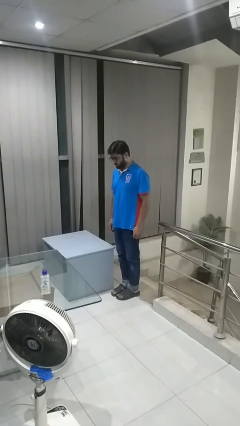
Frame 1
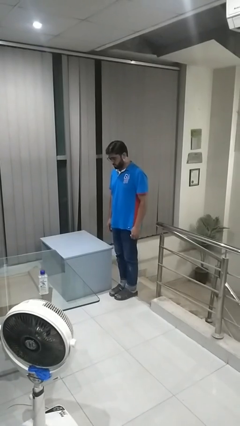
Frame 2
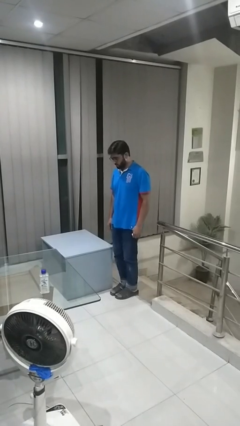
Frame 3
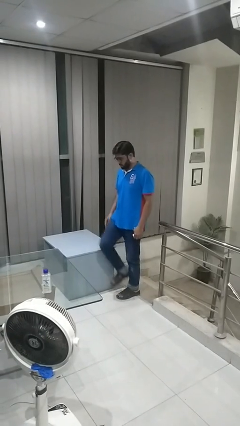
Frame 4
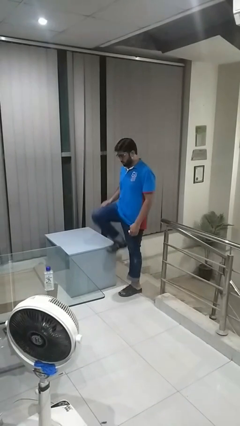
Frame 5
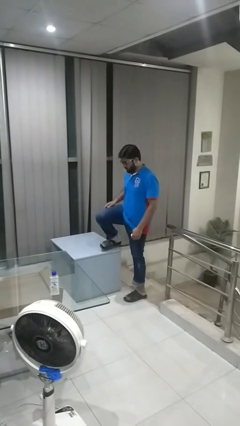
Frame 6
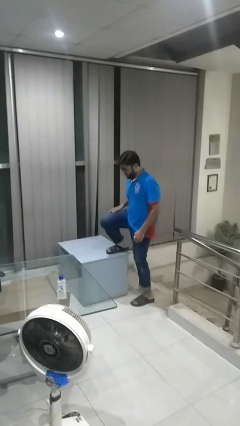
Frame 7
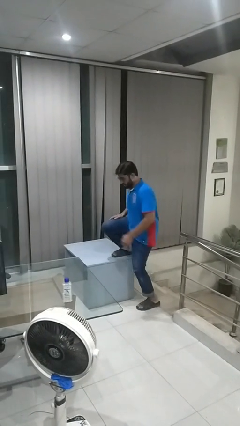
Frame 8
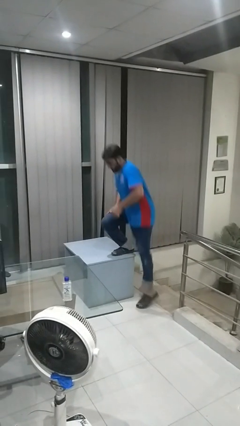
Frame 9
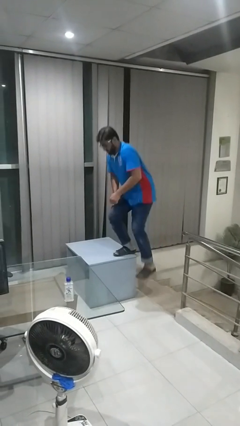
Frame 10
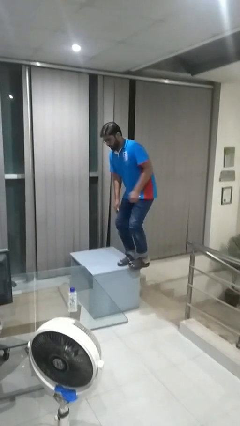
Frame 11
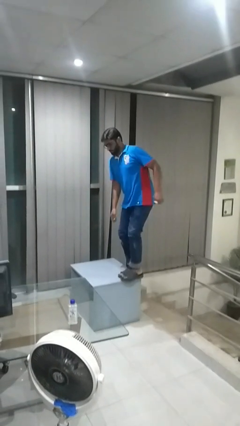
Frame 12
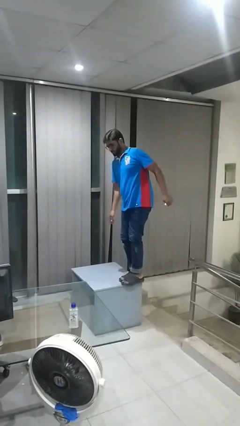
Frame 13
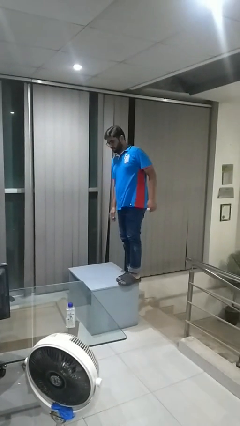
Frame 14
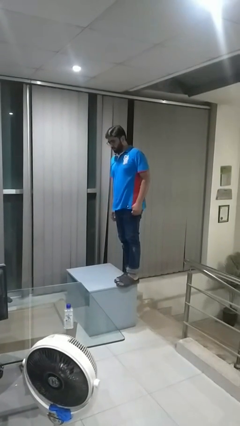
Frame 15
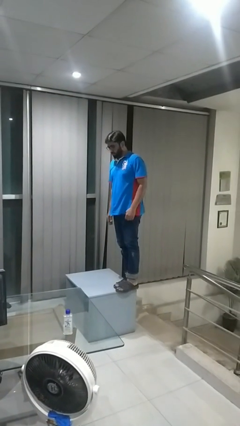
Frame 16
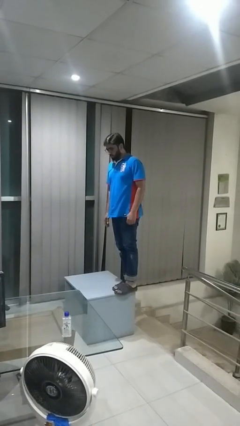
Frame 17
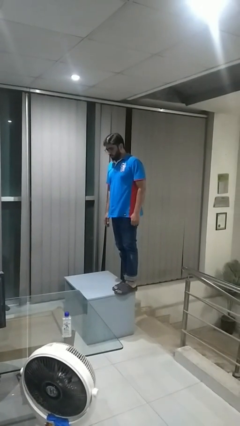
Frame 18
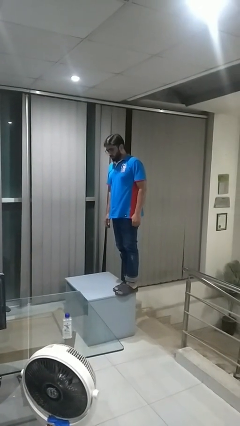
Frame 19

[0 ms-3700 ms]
person climbs on table

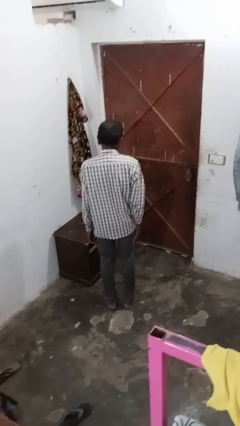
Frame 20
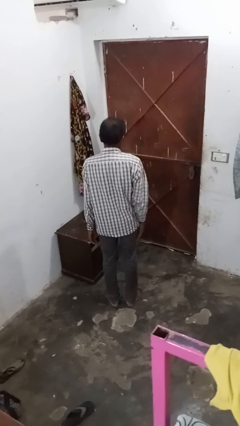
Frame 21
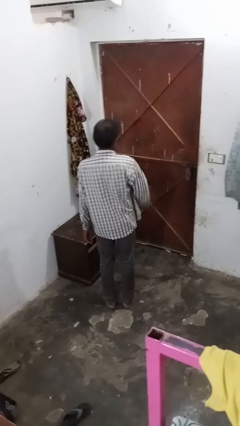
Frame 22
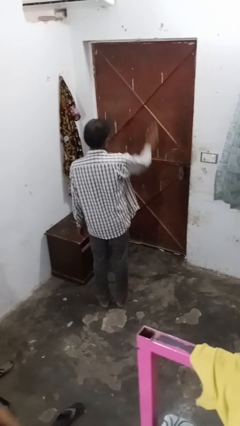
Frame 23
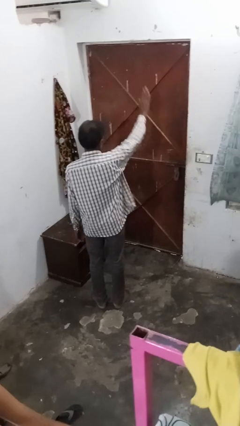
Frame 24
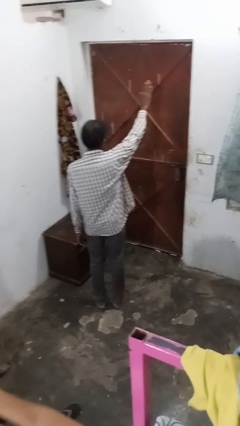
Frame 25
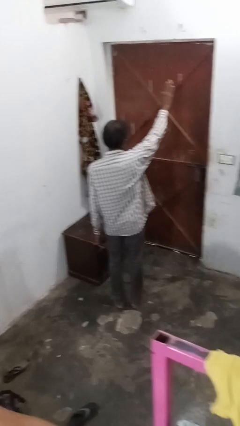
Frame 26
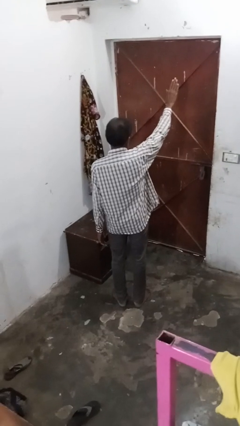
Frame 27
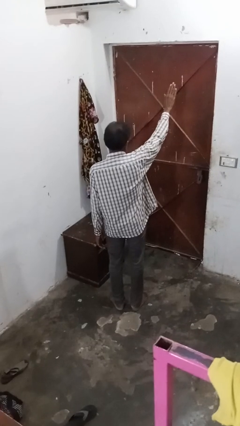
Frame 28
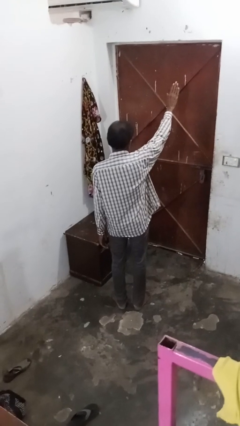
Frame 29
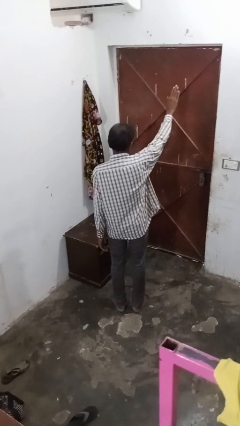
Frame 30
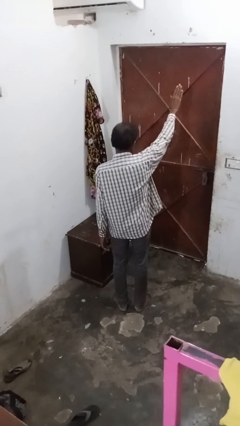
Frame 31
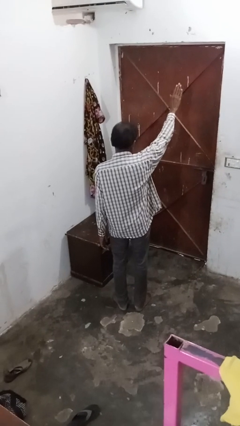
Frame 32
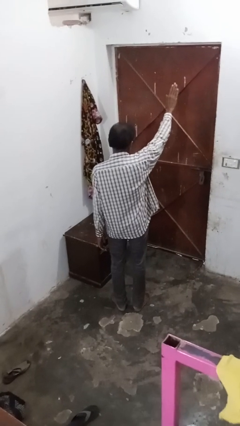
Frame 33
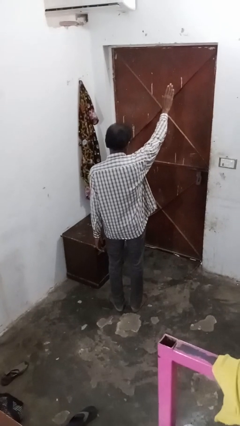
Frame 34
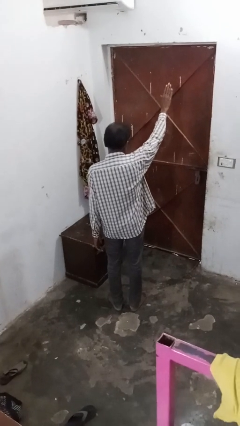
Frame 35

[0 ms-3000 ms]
person gestures stop

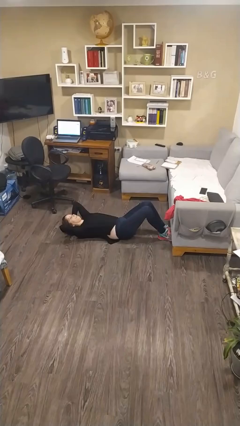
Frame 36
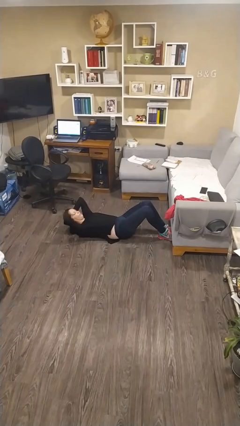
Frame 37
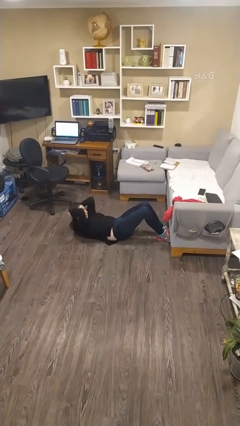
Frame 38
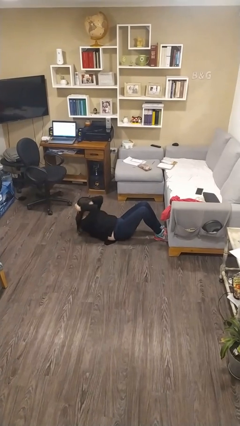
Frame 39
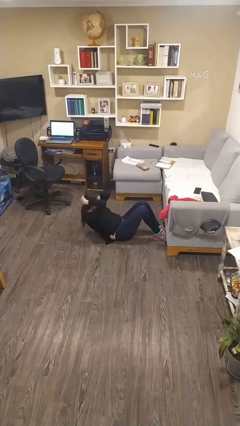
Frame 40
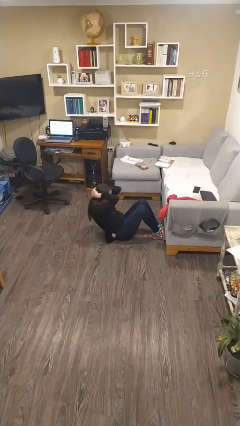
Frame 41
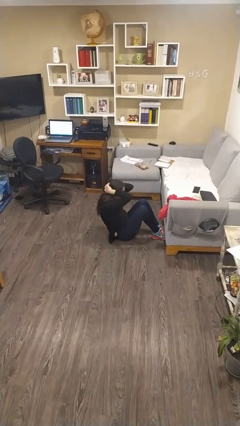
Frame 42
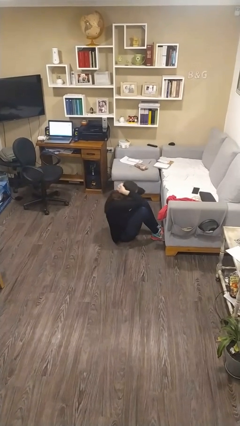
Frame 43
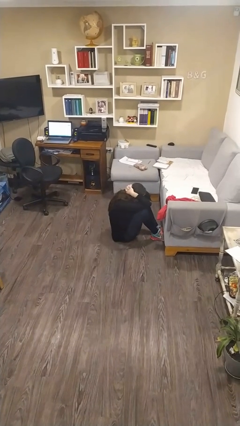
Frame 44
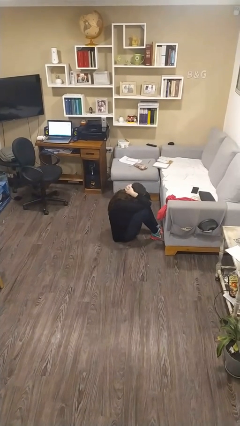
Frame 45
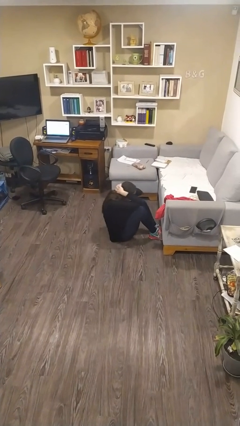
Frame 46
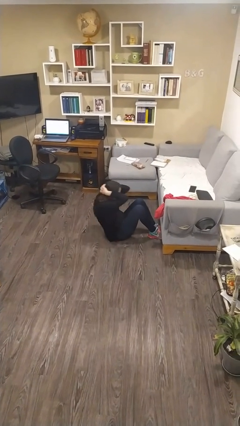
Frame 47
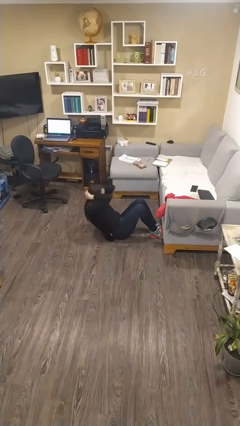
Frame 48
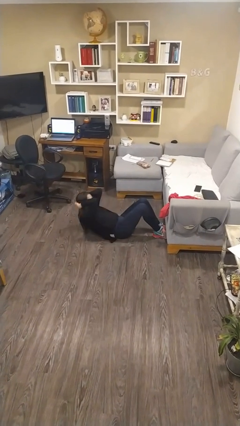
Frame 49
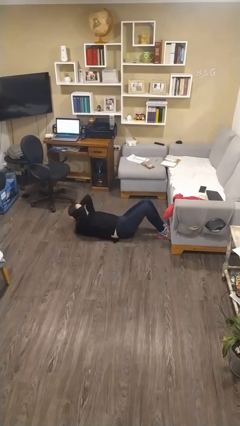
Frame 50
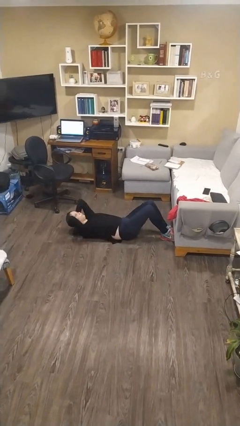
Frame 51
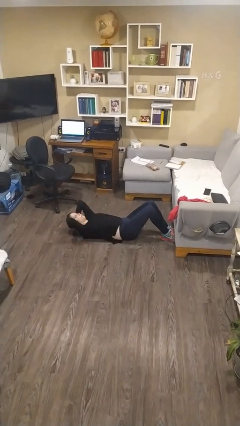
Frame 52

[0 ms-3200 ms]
person exercises with situp

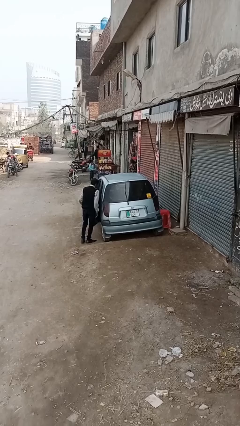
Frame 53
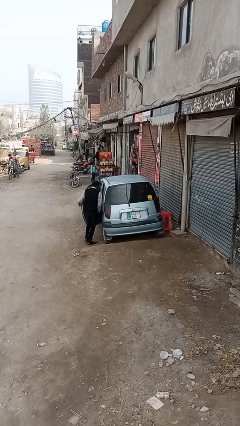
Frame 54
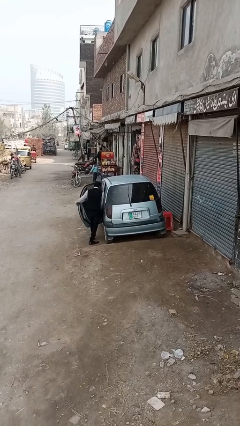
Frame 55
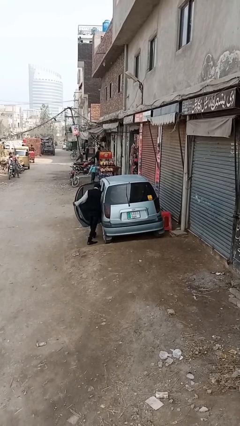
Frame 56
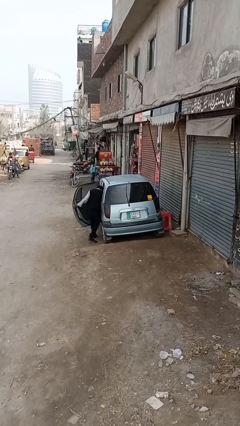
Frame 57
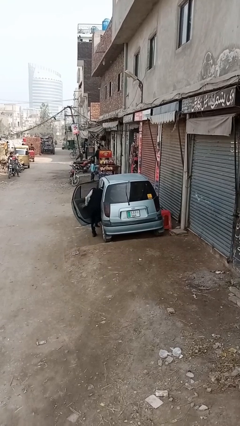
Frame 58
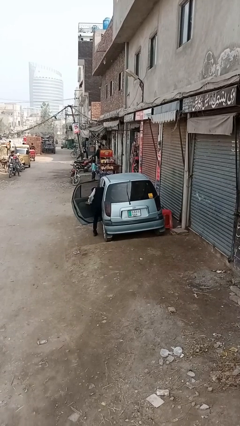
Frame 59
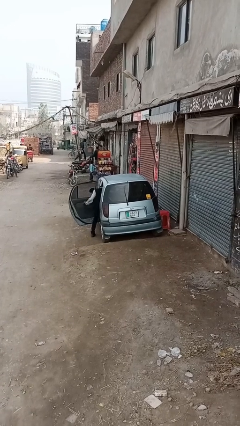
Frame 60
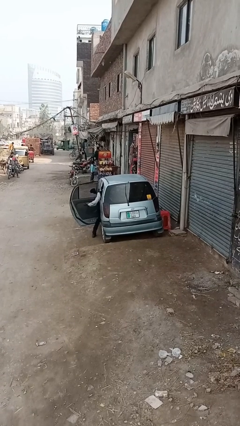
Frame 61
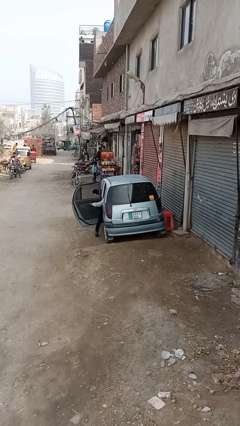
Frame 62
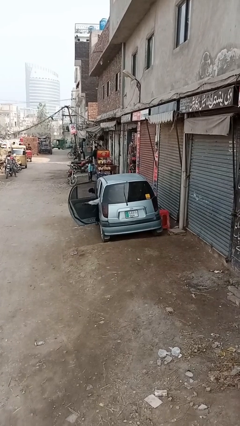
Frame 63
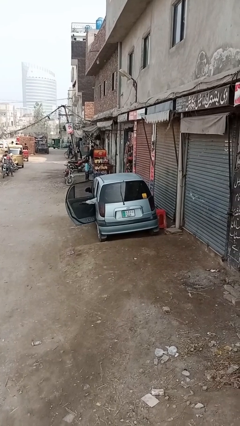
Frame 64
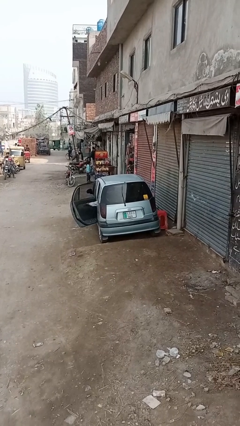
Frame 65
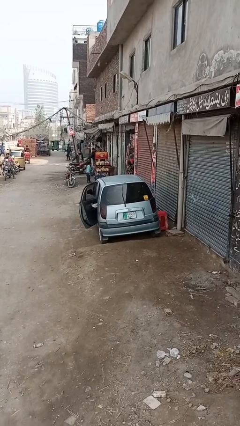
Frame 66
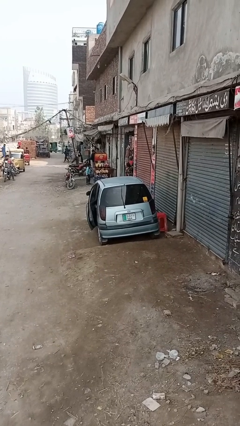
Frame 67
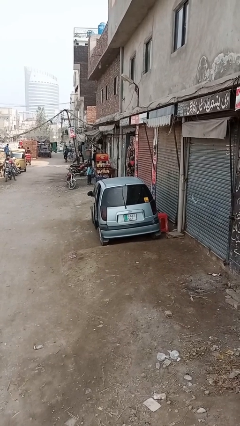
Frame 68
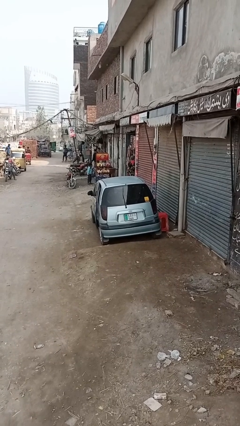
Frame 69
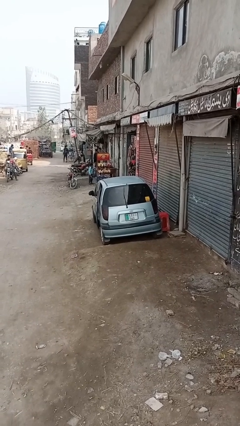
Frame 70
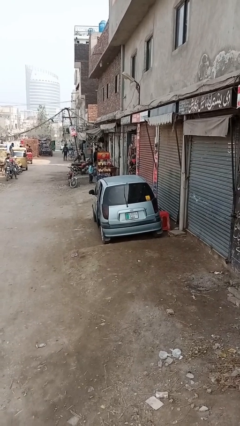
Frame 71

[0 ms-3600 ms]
car picks up person

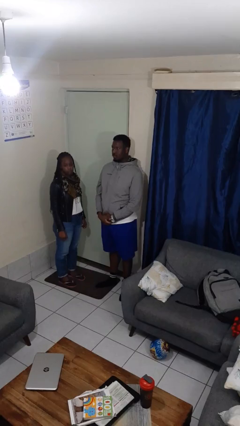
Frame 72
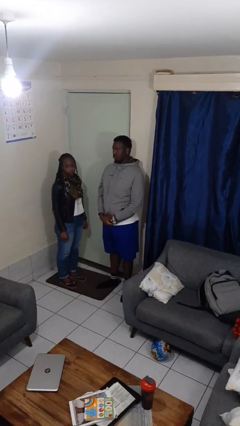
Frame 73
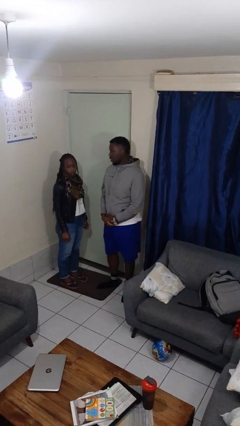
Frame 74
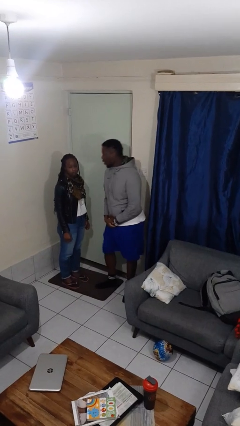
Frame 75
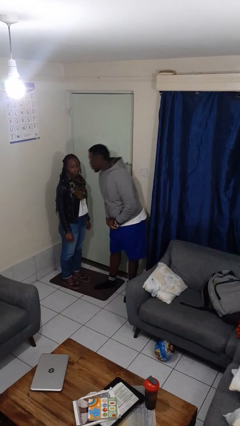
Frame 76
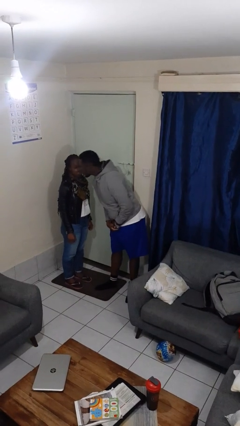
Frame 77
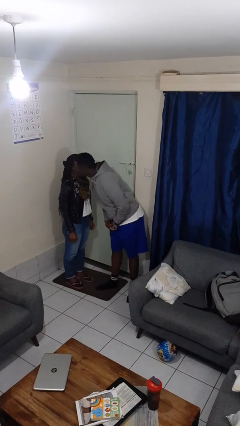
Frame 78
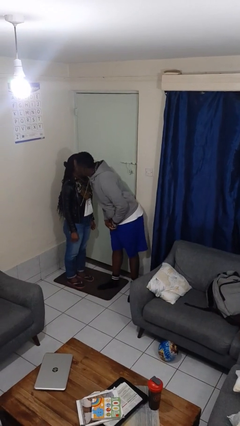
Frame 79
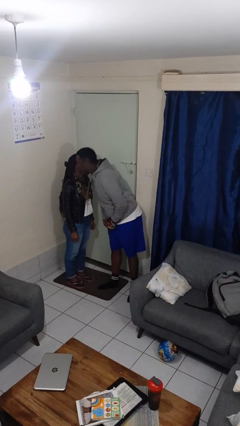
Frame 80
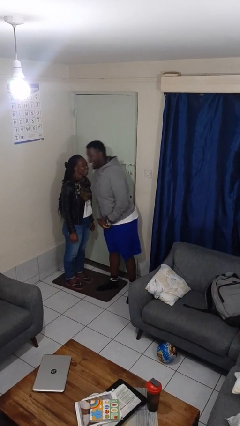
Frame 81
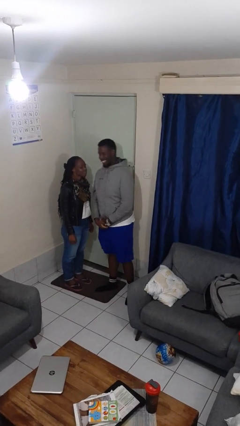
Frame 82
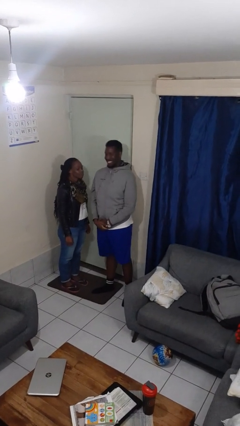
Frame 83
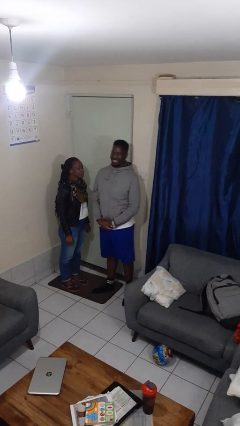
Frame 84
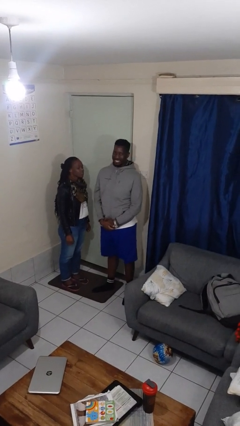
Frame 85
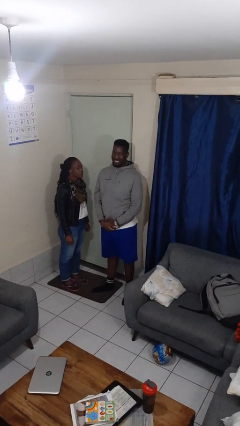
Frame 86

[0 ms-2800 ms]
person kisses cheek of person

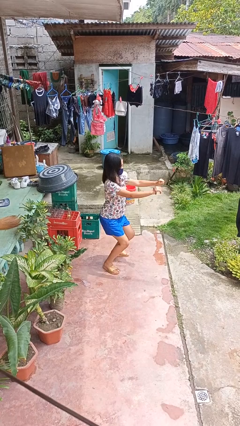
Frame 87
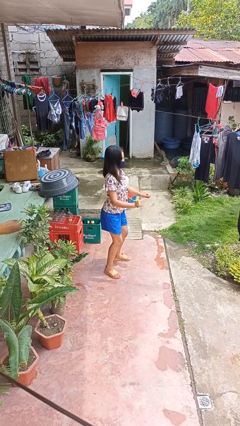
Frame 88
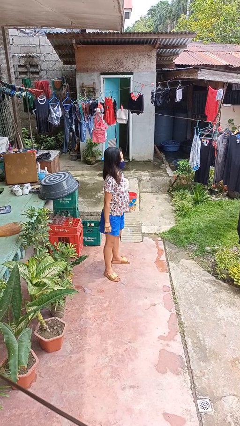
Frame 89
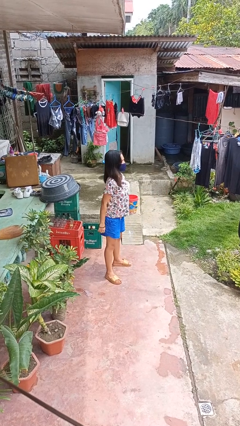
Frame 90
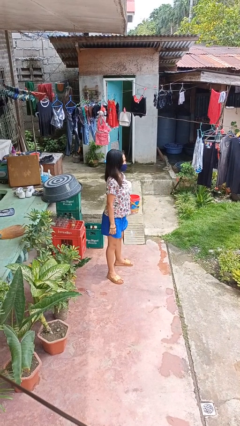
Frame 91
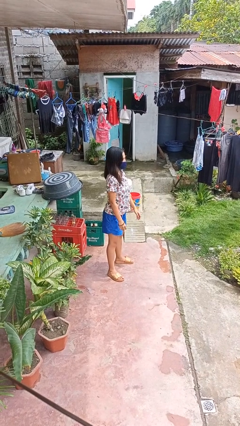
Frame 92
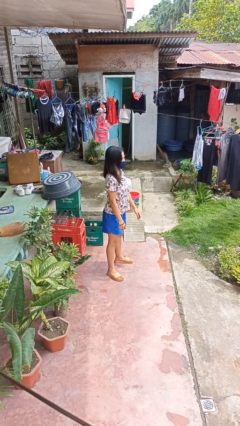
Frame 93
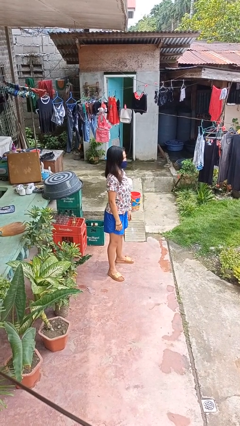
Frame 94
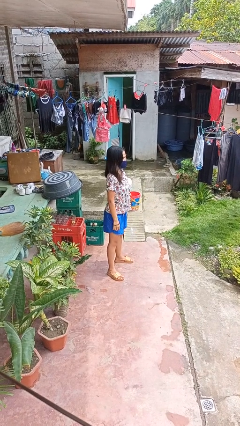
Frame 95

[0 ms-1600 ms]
person stands up
